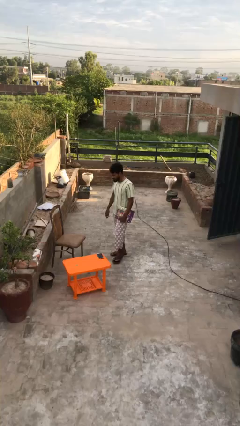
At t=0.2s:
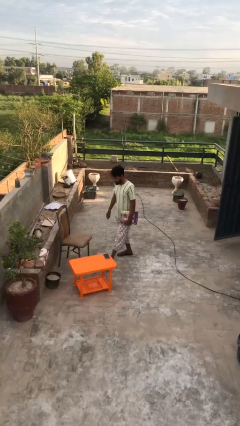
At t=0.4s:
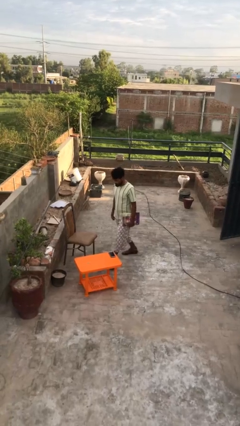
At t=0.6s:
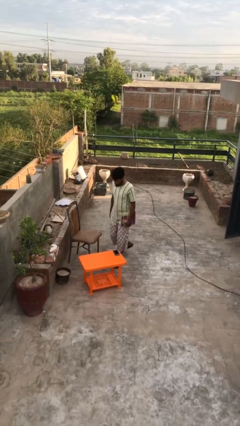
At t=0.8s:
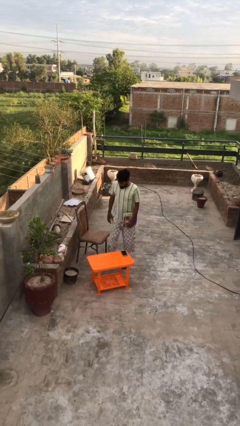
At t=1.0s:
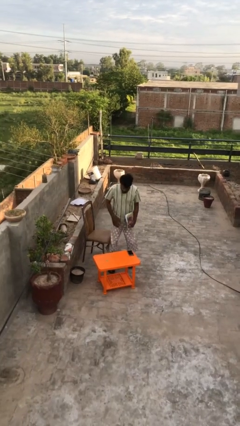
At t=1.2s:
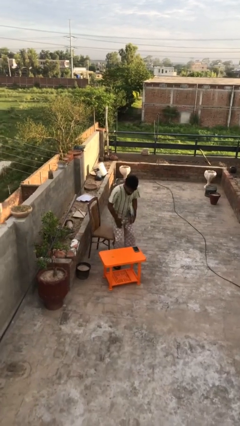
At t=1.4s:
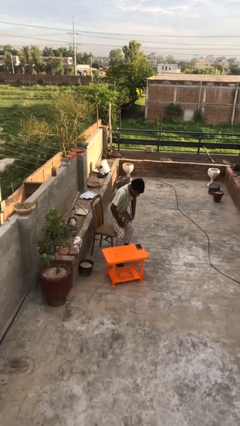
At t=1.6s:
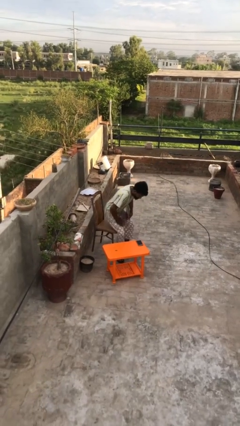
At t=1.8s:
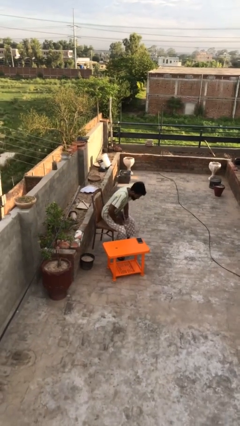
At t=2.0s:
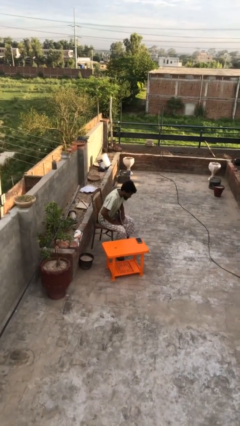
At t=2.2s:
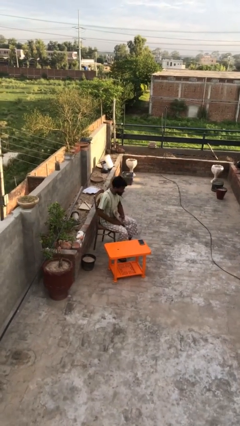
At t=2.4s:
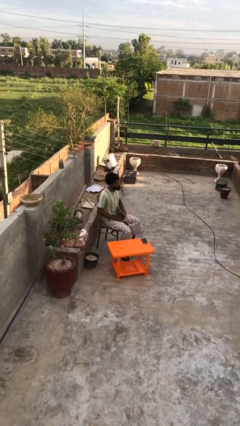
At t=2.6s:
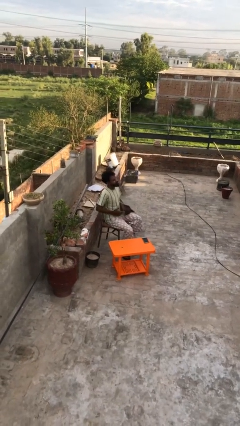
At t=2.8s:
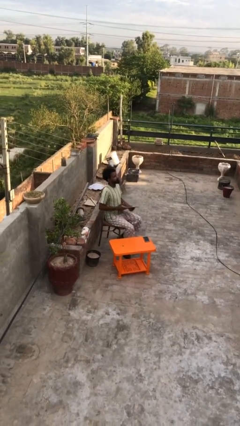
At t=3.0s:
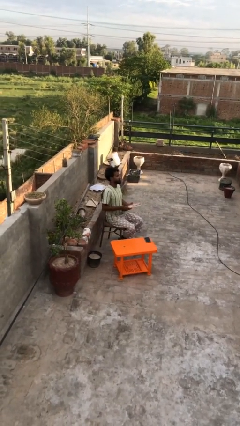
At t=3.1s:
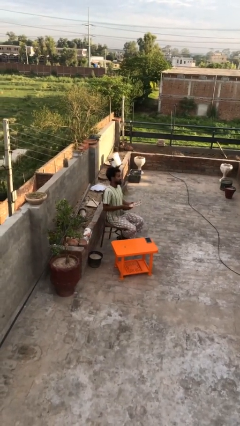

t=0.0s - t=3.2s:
person sits down

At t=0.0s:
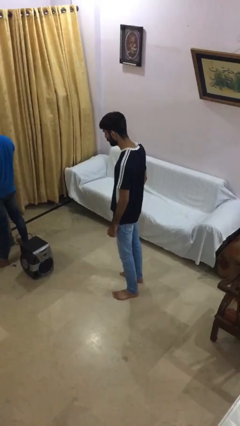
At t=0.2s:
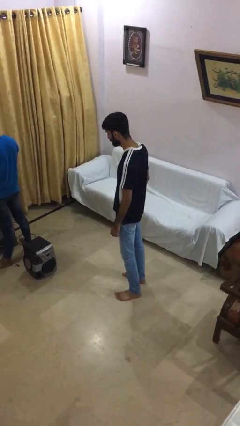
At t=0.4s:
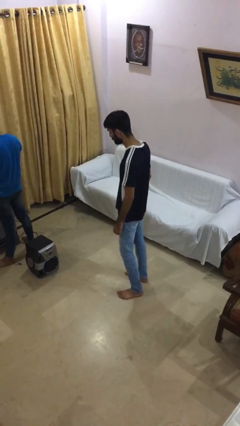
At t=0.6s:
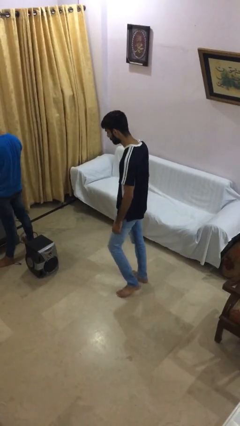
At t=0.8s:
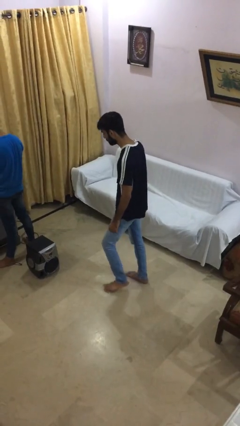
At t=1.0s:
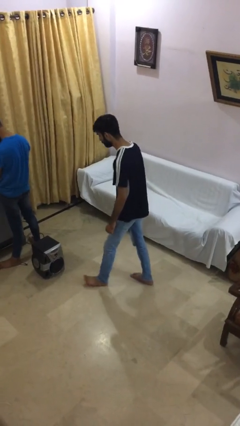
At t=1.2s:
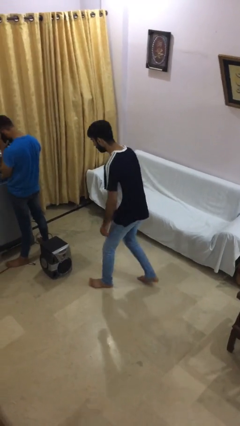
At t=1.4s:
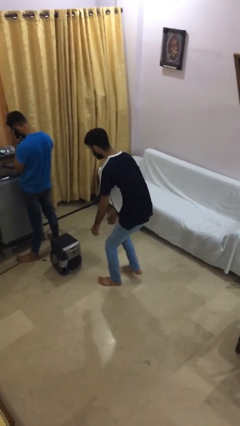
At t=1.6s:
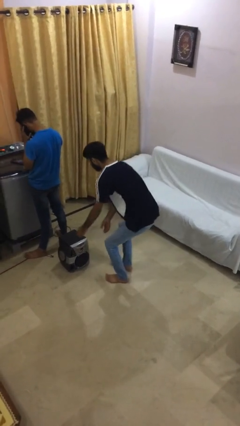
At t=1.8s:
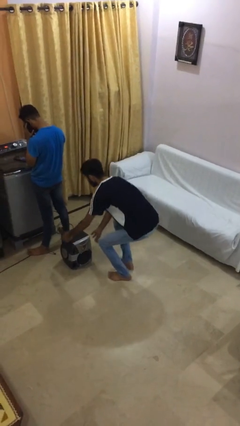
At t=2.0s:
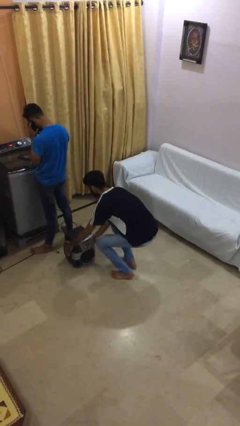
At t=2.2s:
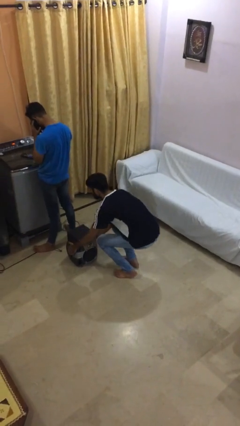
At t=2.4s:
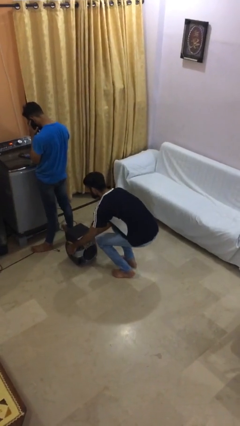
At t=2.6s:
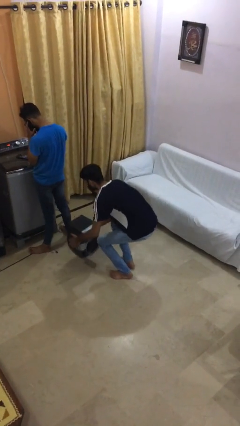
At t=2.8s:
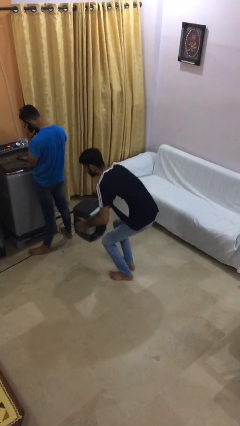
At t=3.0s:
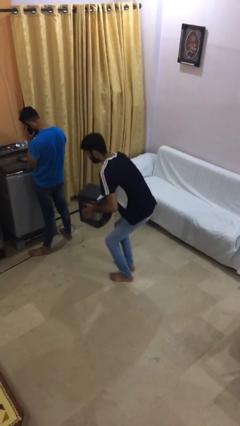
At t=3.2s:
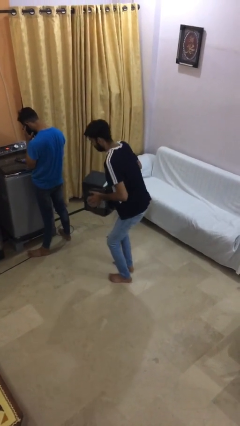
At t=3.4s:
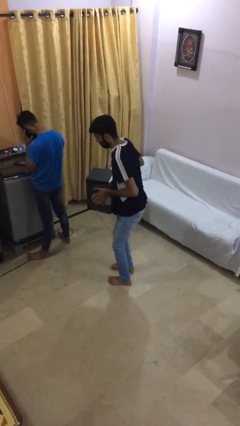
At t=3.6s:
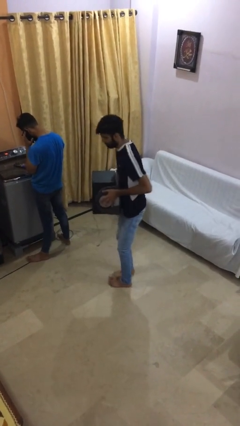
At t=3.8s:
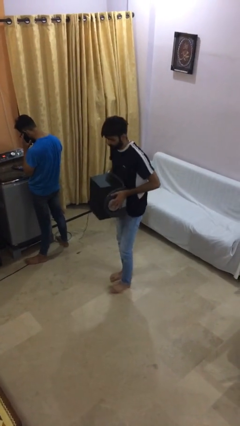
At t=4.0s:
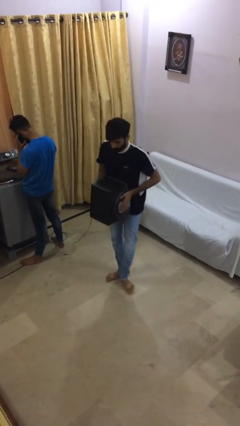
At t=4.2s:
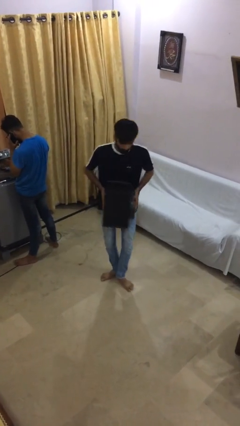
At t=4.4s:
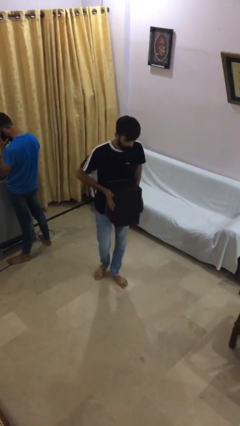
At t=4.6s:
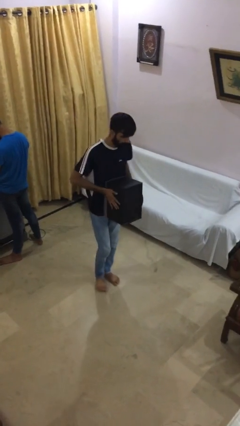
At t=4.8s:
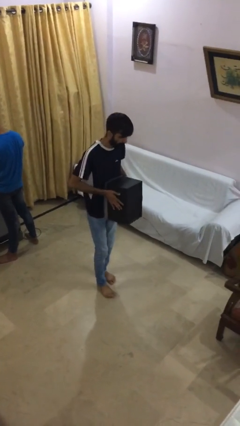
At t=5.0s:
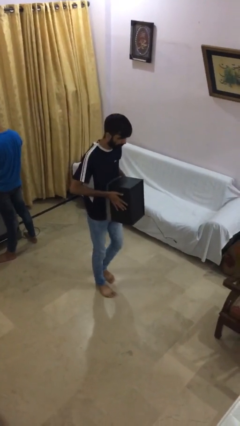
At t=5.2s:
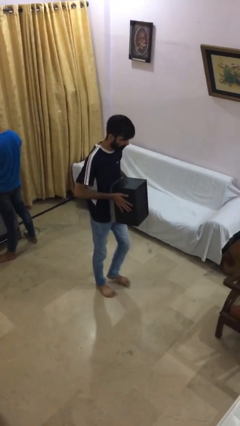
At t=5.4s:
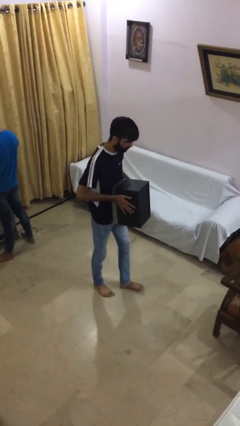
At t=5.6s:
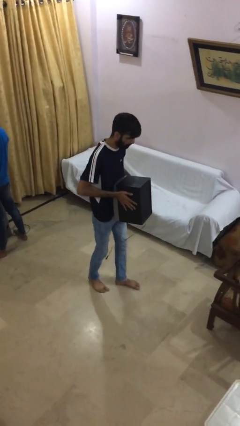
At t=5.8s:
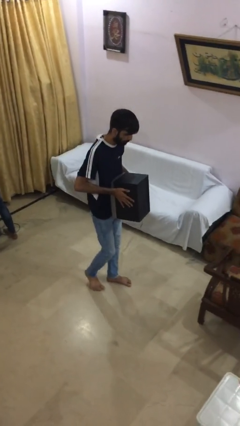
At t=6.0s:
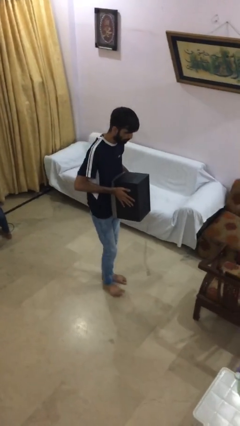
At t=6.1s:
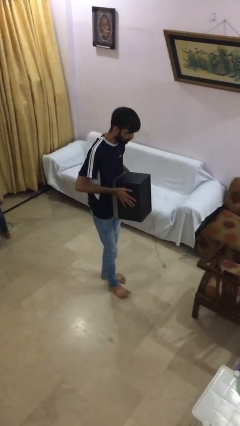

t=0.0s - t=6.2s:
person steals object from person

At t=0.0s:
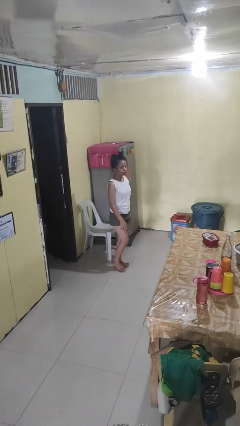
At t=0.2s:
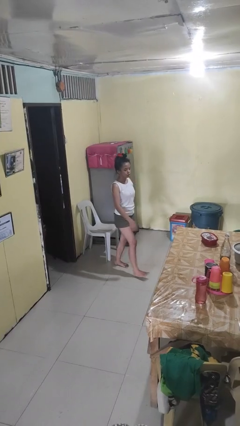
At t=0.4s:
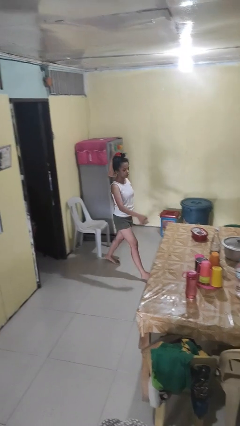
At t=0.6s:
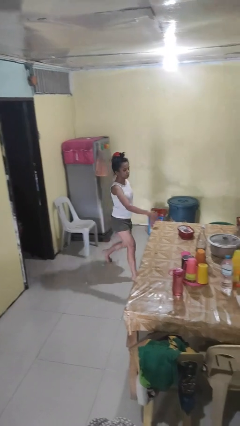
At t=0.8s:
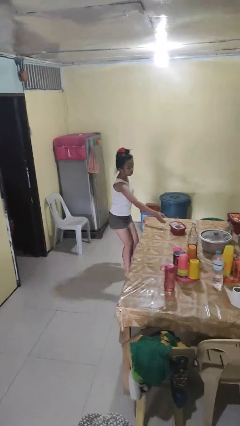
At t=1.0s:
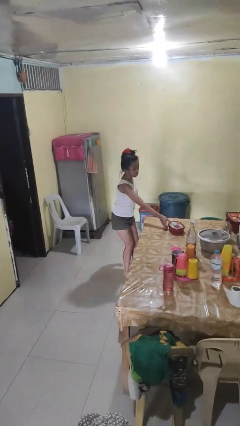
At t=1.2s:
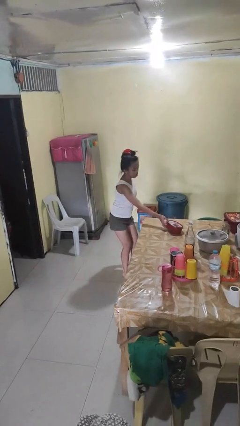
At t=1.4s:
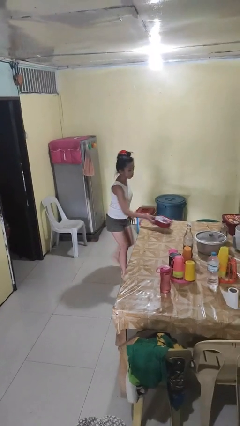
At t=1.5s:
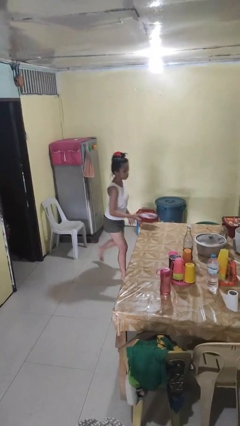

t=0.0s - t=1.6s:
person picks up object from table

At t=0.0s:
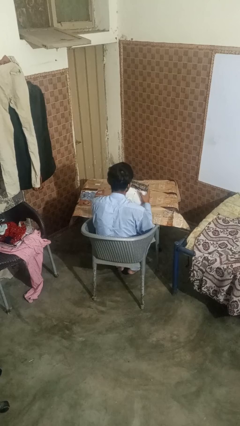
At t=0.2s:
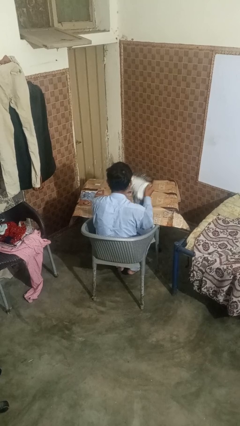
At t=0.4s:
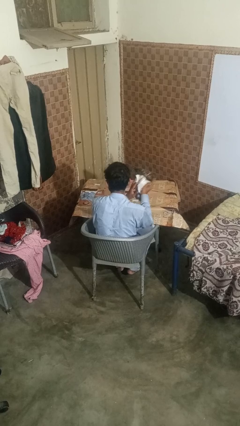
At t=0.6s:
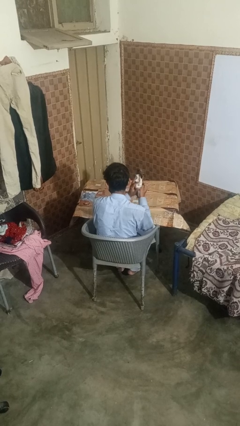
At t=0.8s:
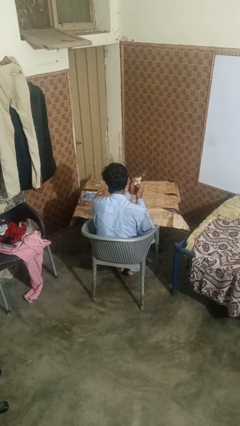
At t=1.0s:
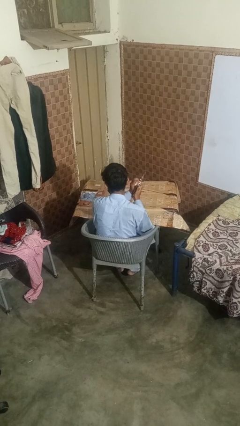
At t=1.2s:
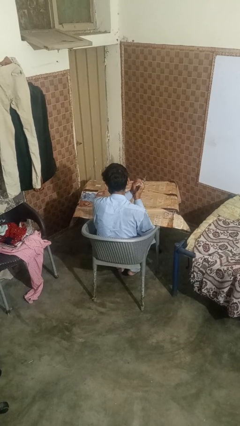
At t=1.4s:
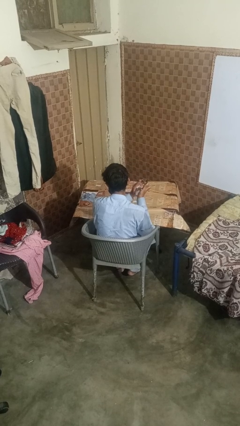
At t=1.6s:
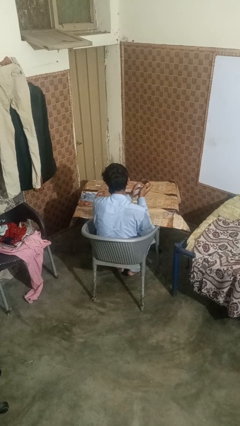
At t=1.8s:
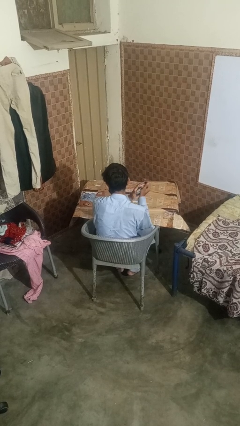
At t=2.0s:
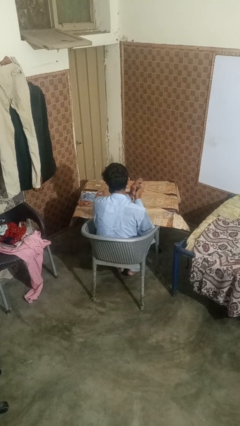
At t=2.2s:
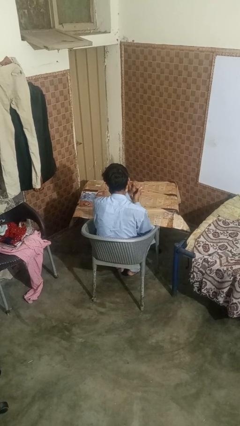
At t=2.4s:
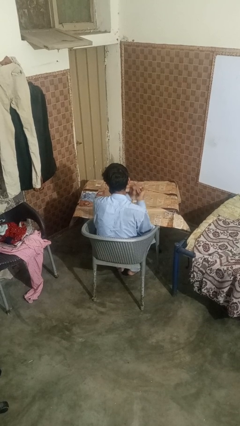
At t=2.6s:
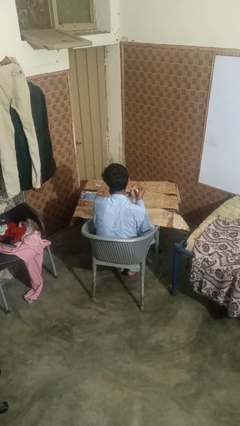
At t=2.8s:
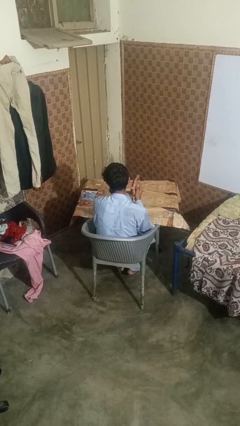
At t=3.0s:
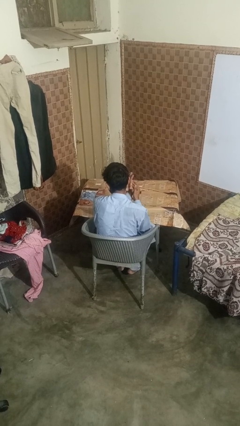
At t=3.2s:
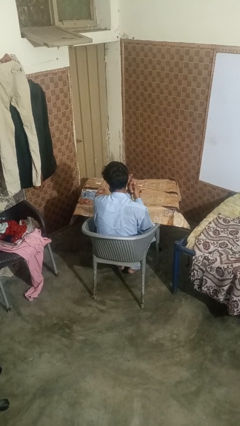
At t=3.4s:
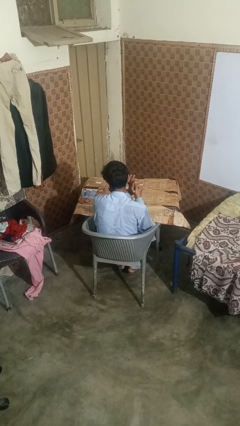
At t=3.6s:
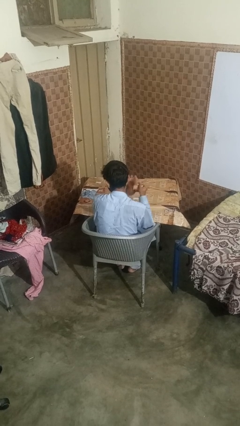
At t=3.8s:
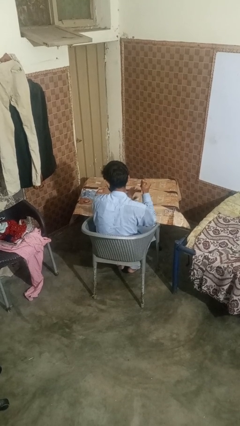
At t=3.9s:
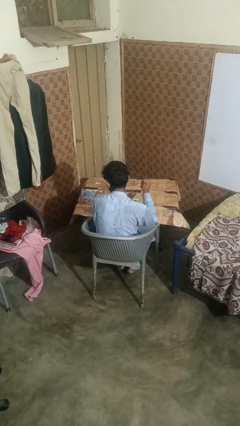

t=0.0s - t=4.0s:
person crumples paper

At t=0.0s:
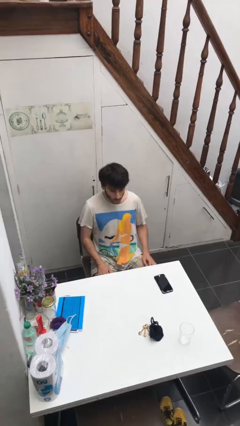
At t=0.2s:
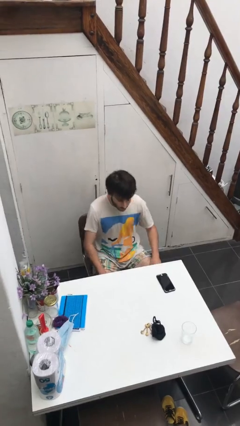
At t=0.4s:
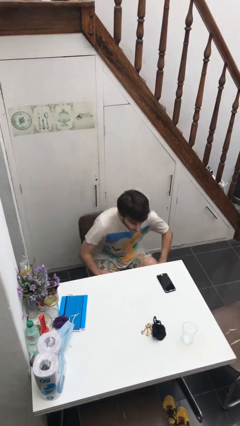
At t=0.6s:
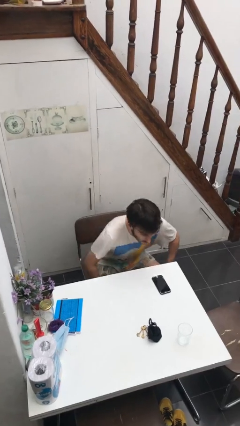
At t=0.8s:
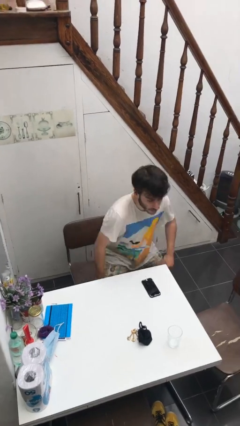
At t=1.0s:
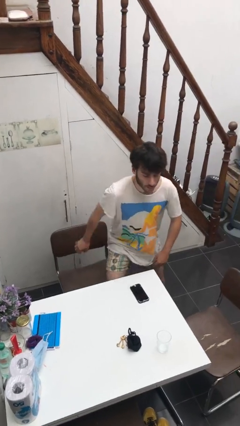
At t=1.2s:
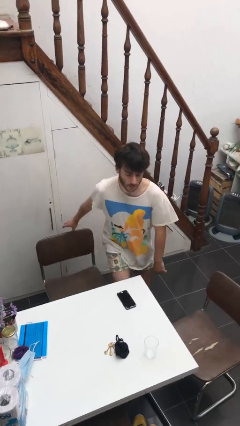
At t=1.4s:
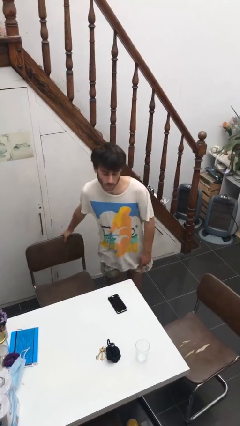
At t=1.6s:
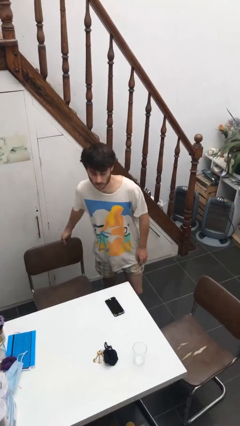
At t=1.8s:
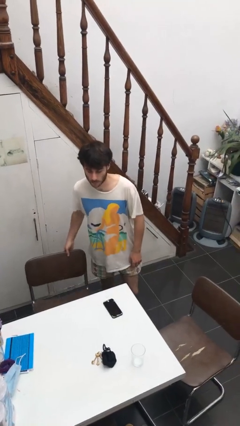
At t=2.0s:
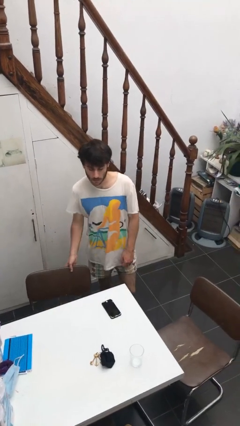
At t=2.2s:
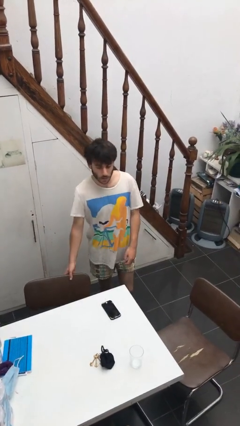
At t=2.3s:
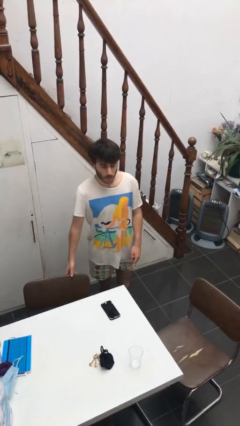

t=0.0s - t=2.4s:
person stands up
